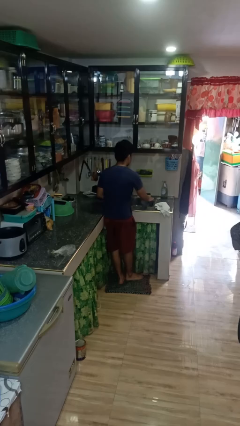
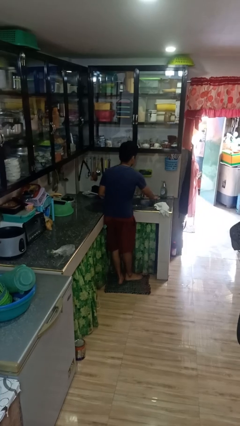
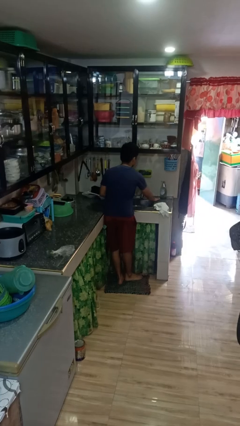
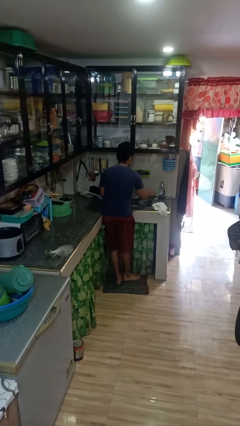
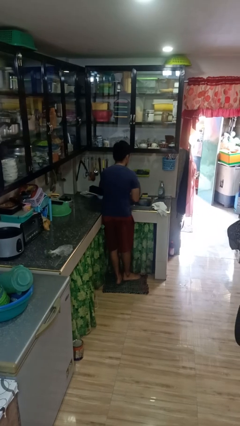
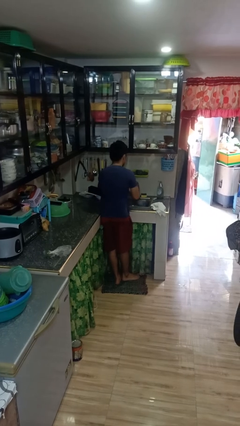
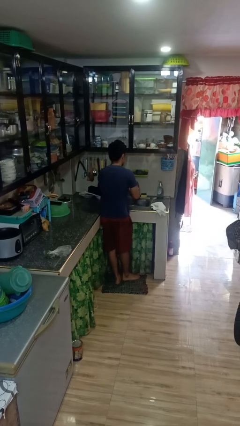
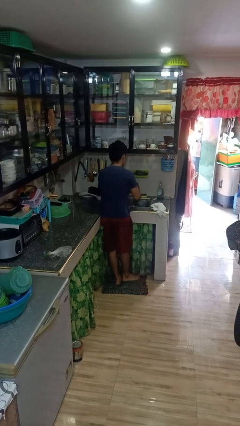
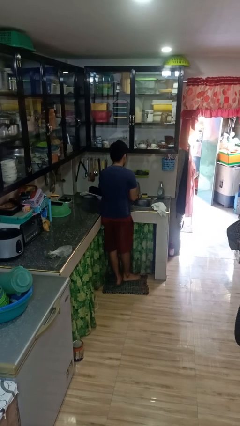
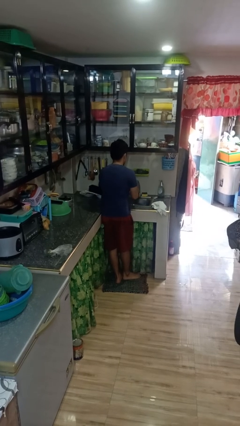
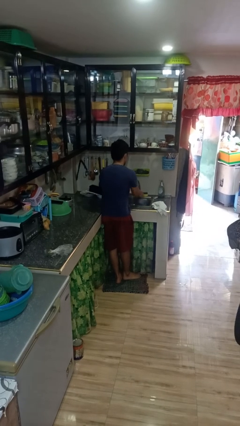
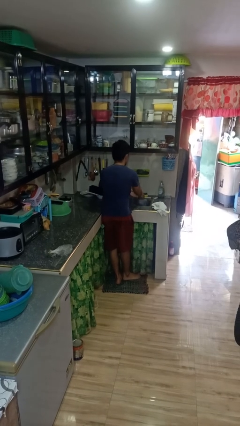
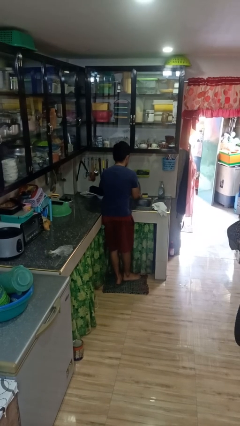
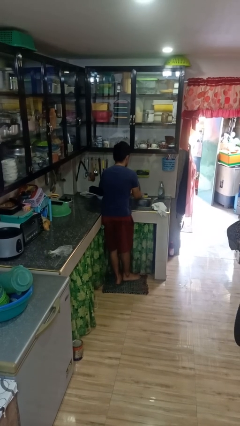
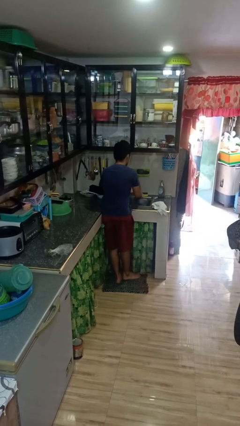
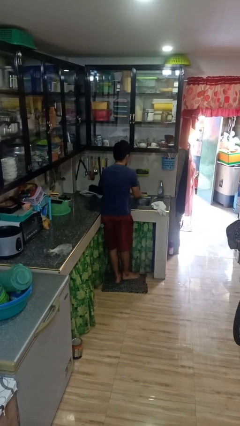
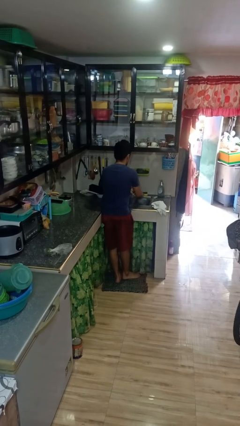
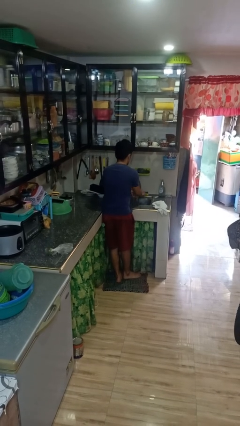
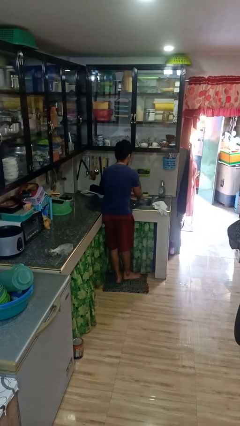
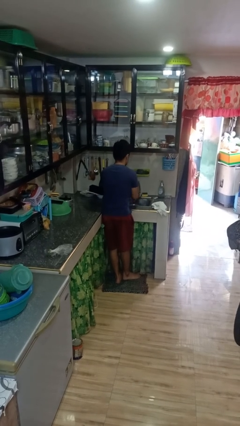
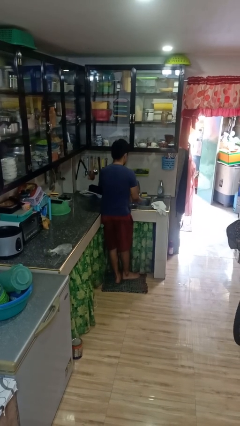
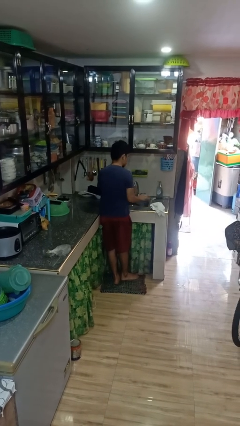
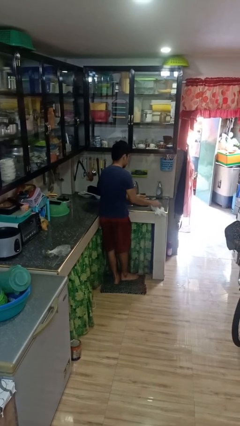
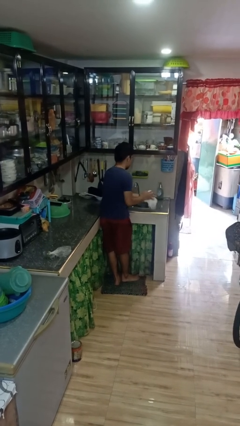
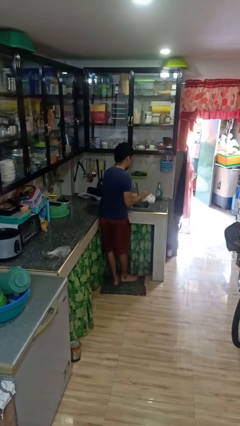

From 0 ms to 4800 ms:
person washes hands

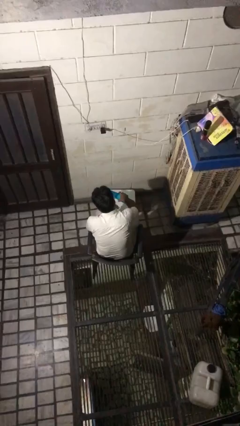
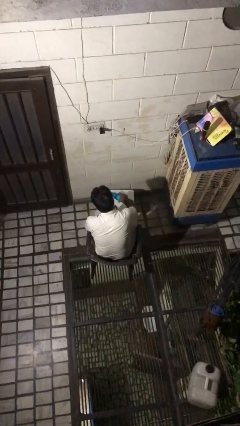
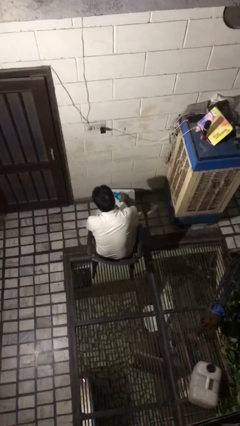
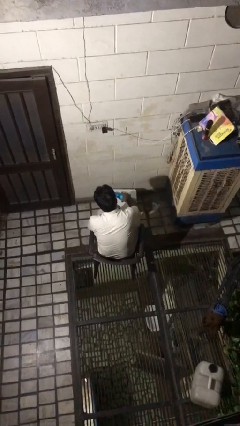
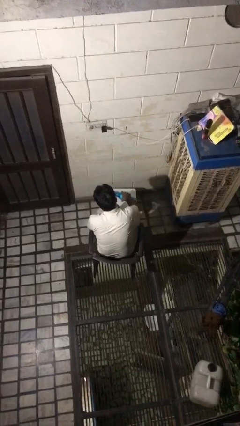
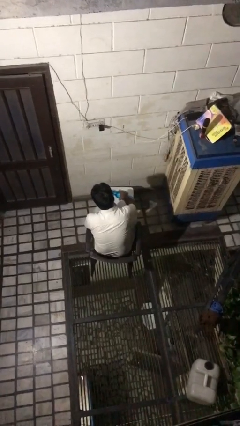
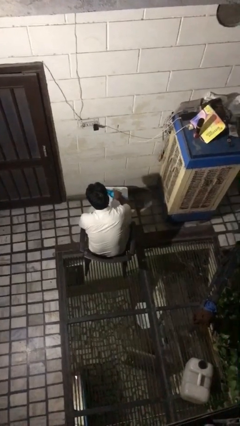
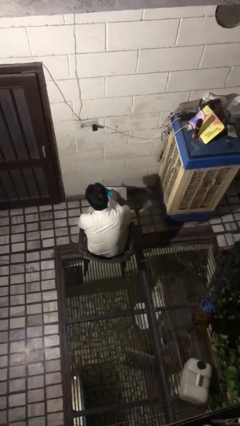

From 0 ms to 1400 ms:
person pours liquid into cup

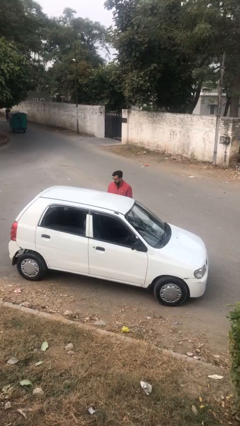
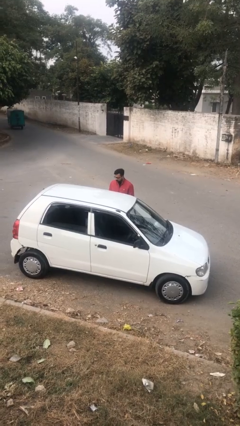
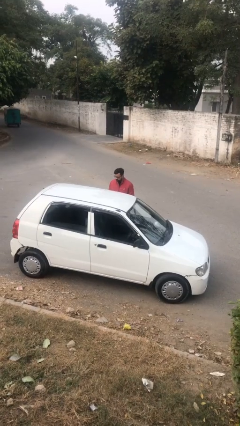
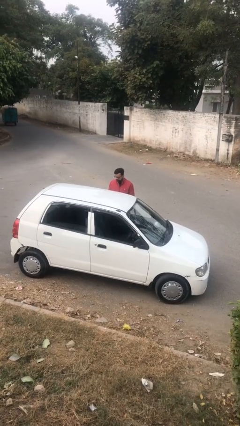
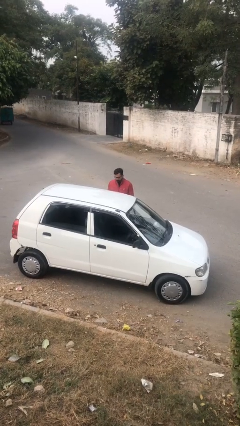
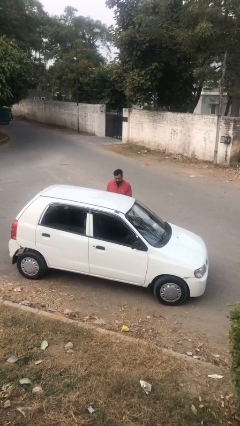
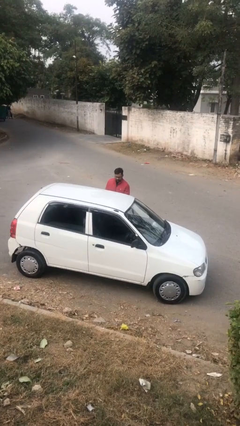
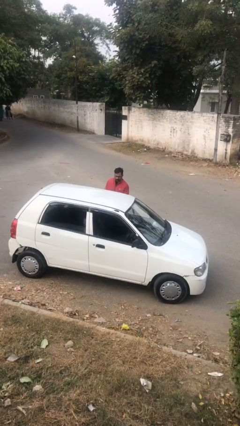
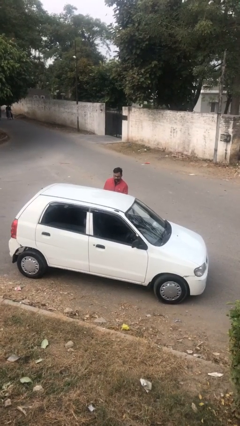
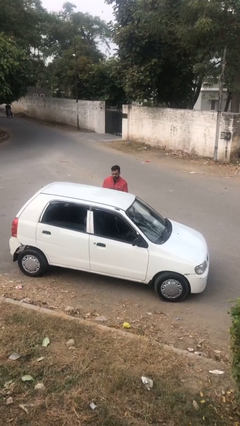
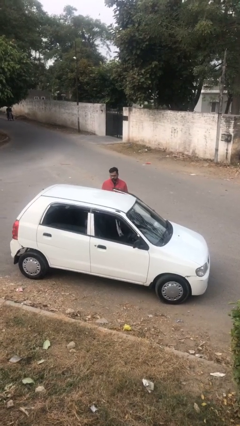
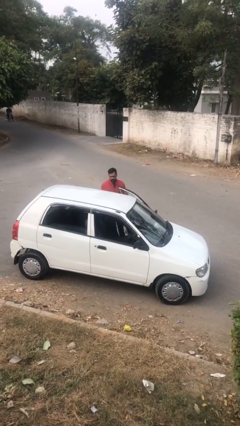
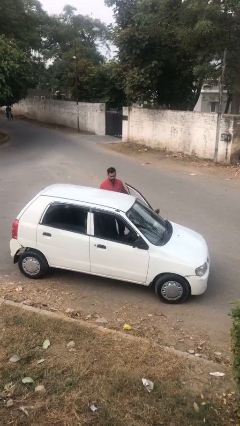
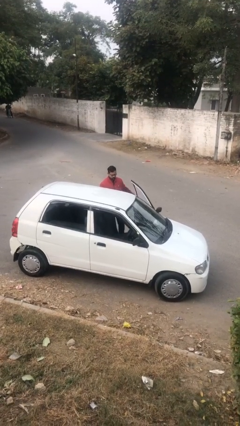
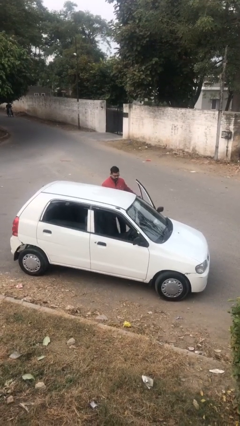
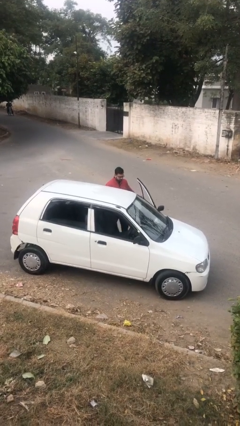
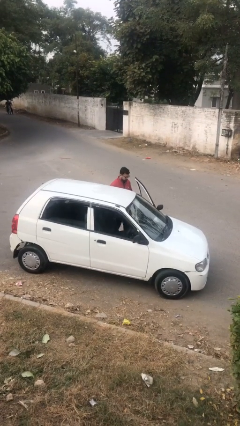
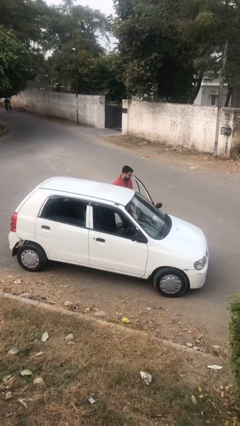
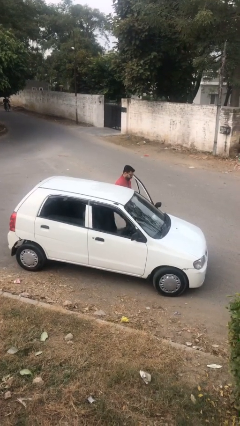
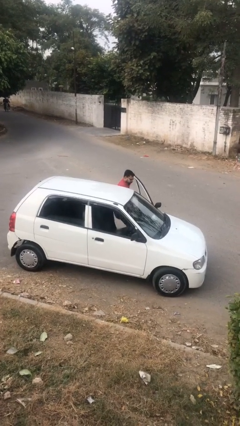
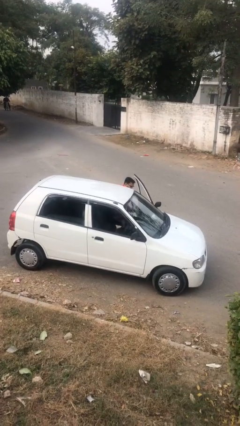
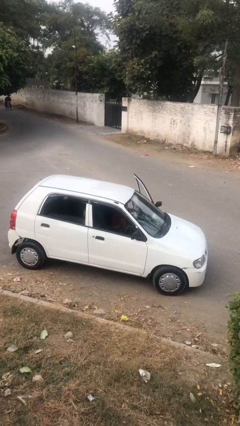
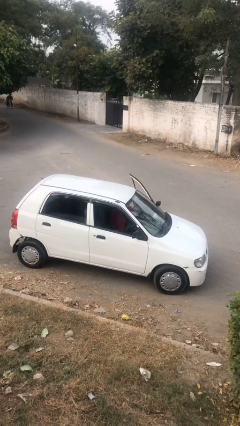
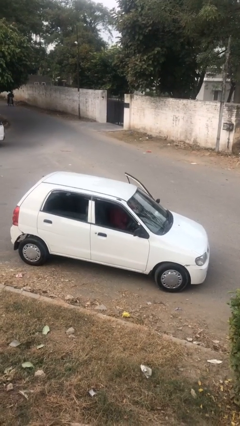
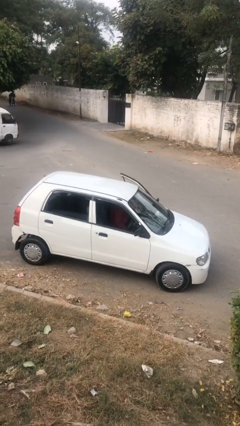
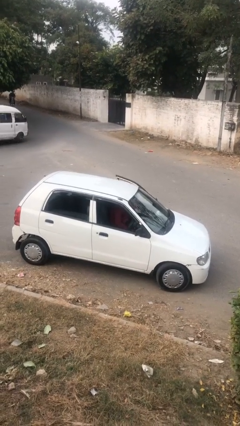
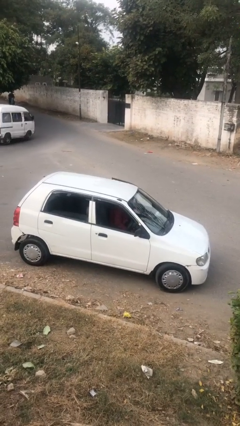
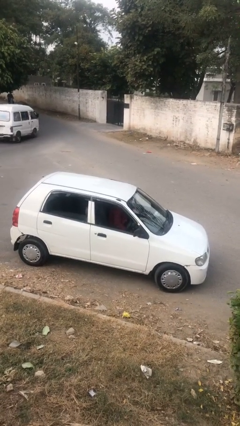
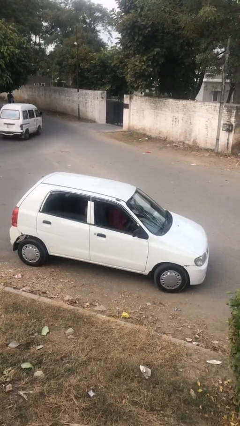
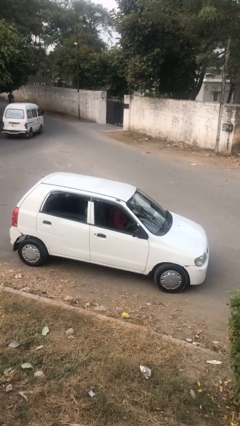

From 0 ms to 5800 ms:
person enters car

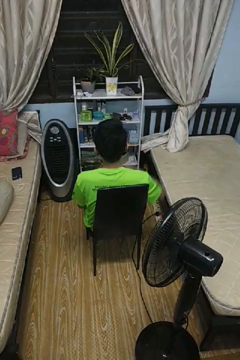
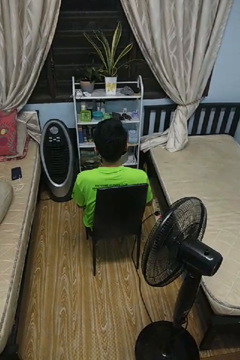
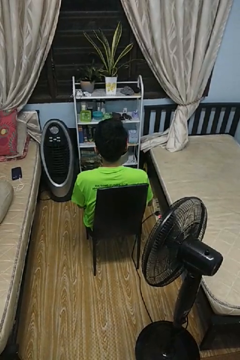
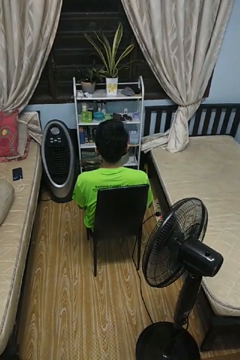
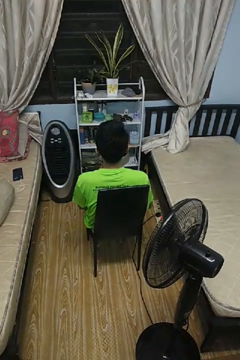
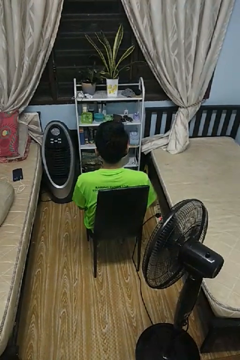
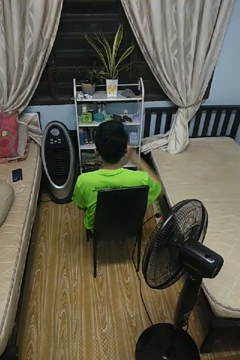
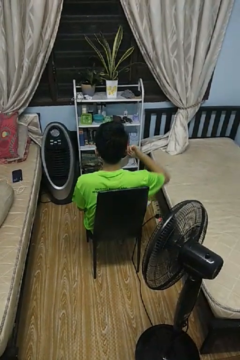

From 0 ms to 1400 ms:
person gestures call me

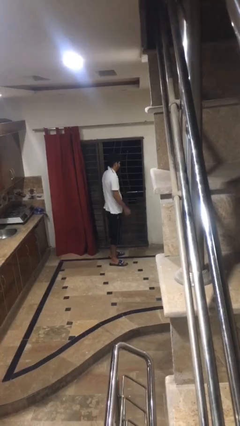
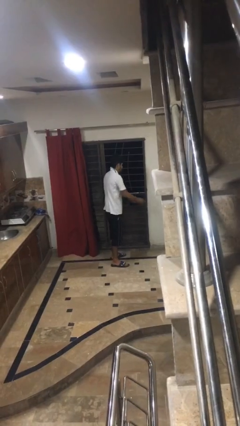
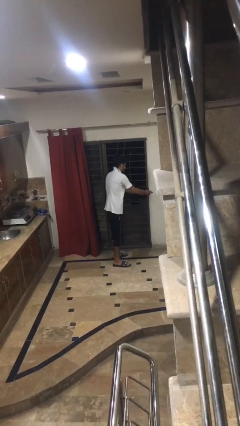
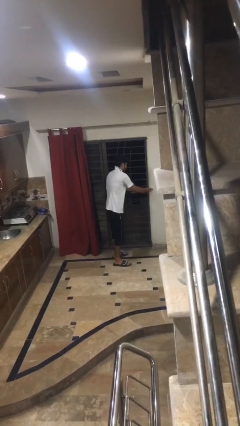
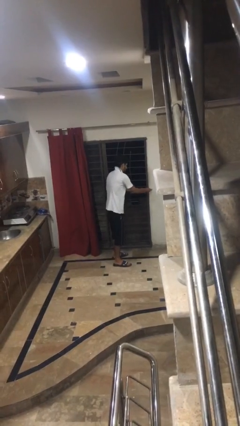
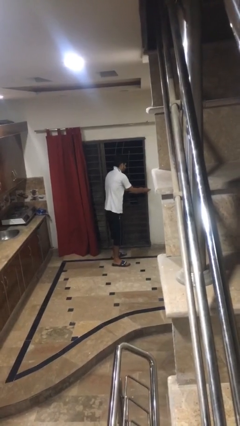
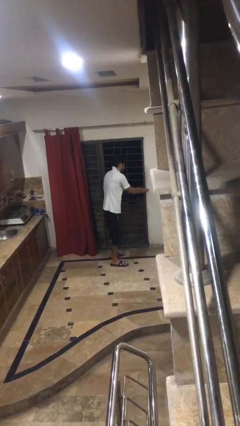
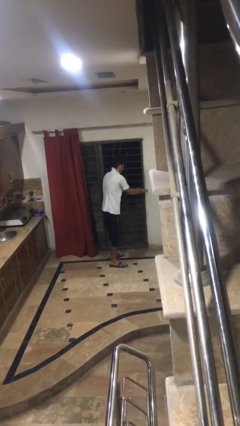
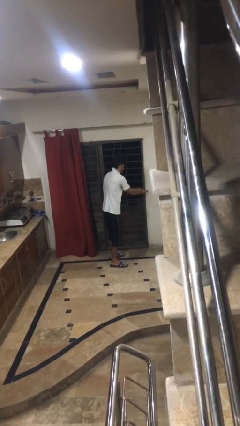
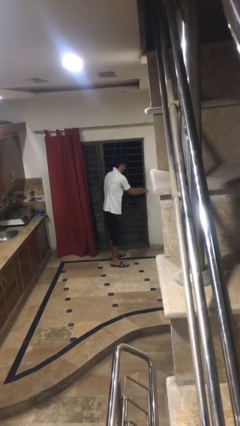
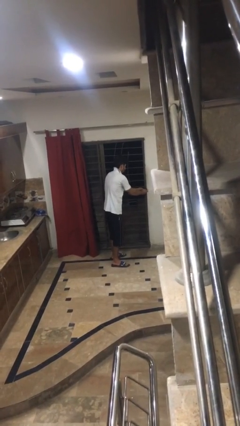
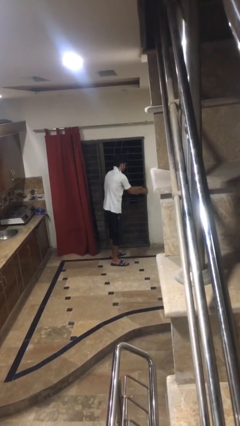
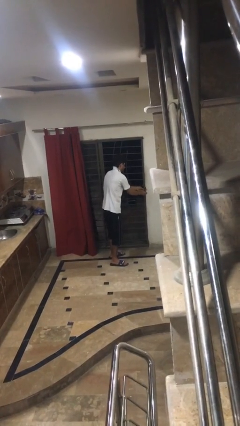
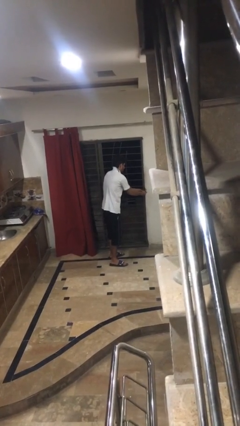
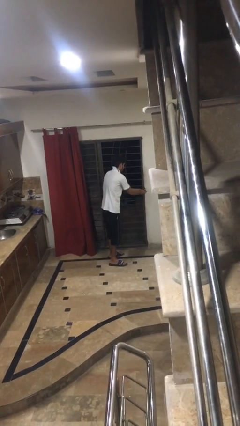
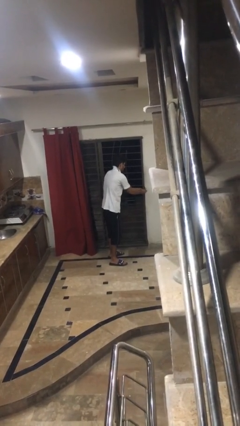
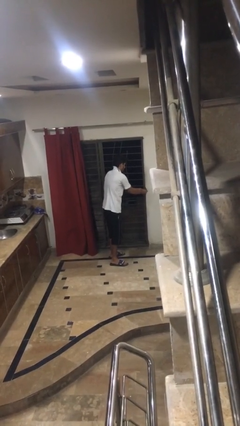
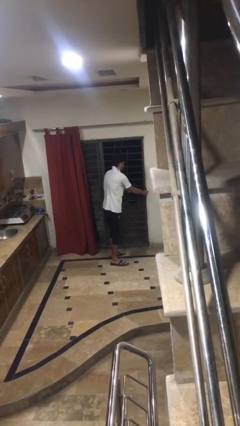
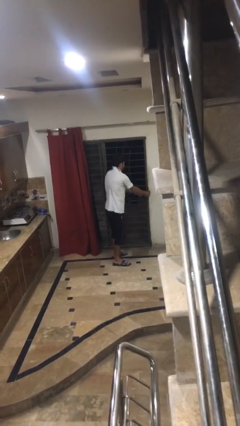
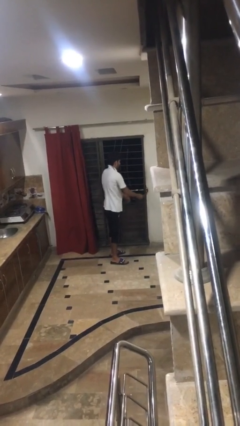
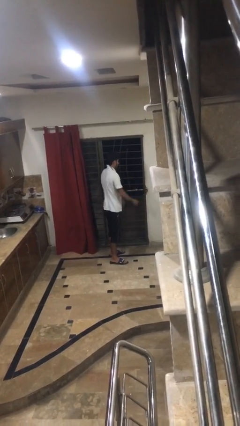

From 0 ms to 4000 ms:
person locks door with keys
